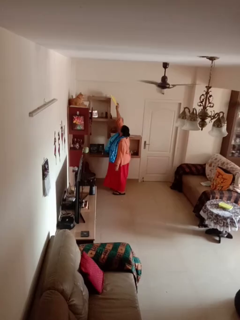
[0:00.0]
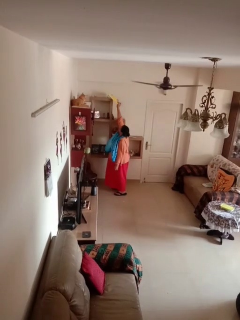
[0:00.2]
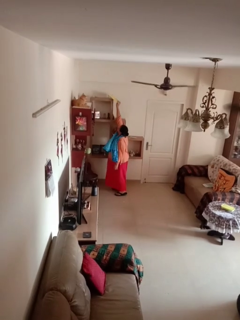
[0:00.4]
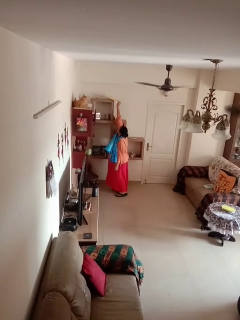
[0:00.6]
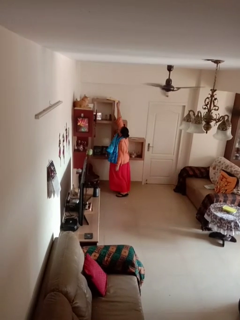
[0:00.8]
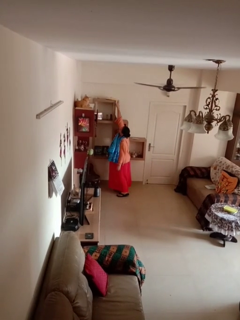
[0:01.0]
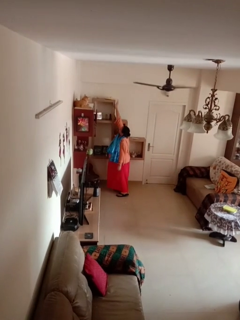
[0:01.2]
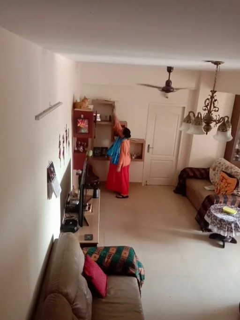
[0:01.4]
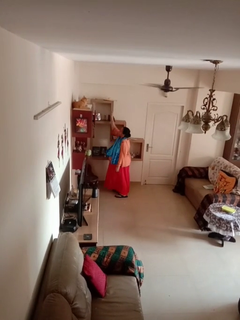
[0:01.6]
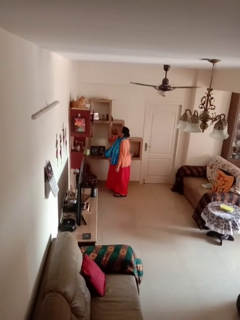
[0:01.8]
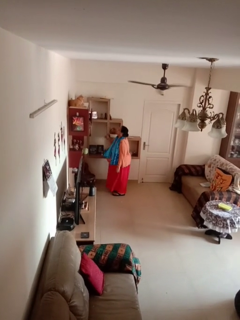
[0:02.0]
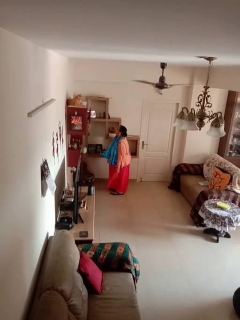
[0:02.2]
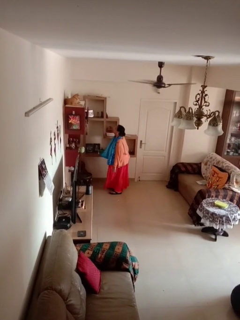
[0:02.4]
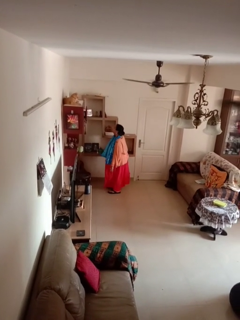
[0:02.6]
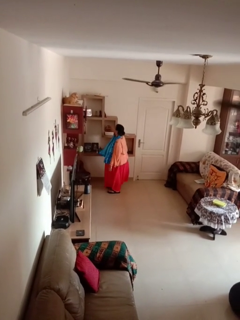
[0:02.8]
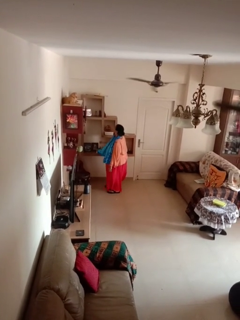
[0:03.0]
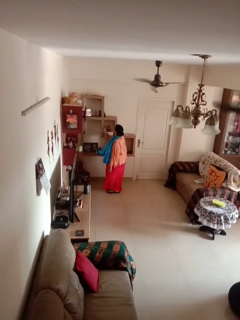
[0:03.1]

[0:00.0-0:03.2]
person puts down object on shelf

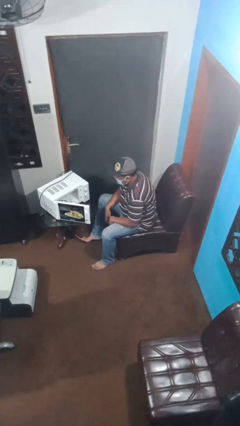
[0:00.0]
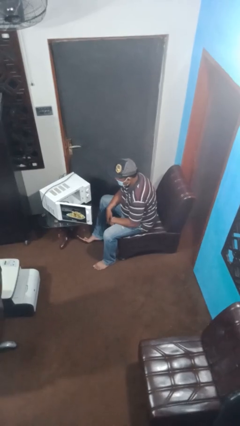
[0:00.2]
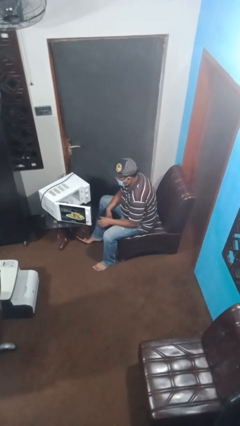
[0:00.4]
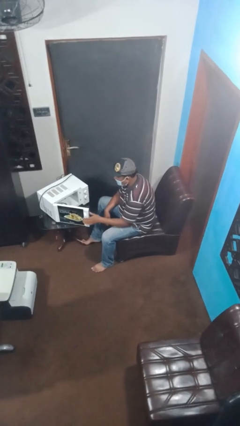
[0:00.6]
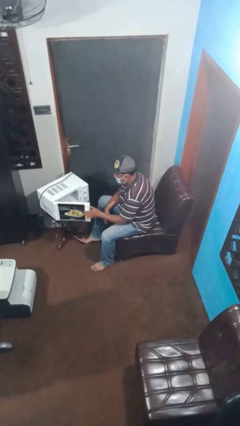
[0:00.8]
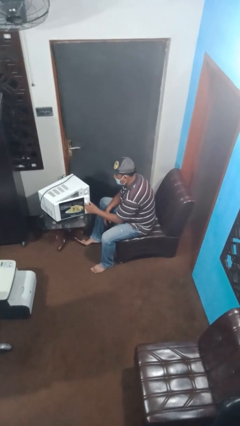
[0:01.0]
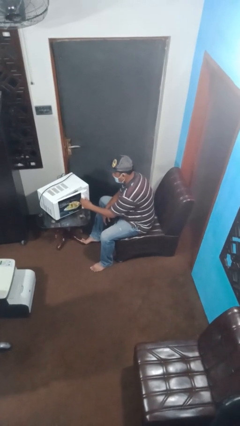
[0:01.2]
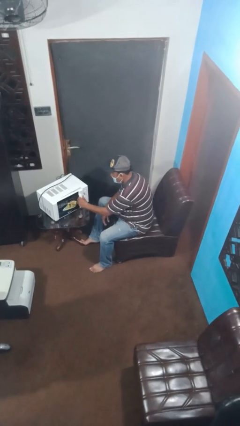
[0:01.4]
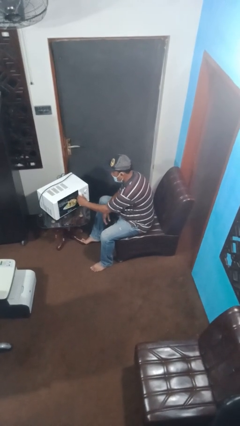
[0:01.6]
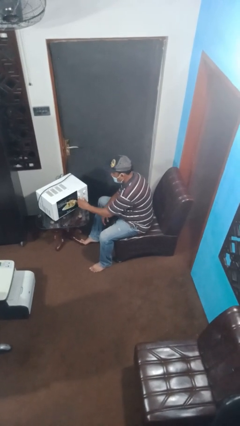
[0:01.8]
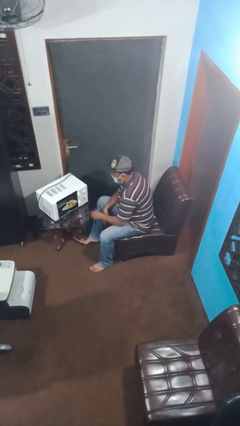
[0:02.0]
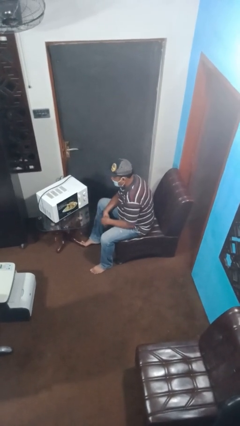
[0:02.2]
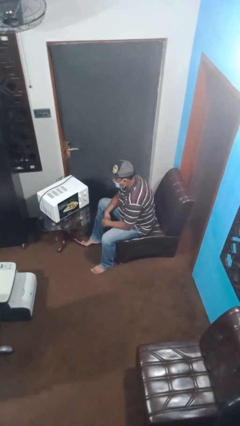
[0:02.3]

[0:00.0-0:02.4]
person closes microwave

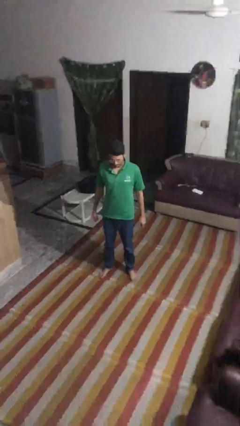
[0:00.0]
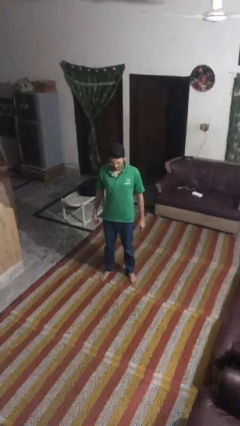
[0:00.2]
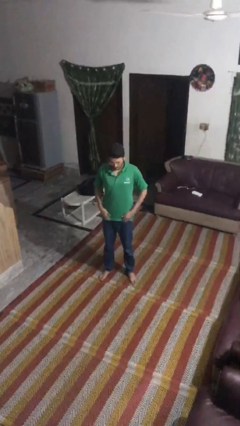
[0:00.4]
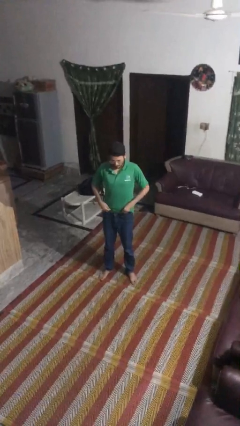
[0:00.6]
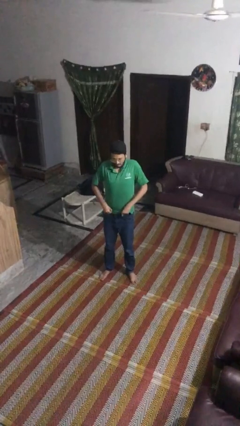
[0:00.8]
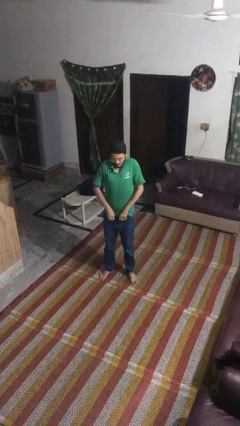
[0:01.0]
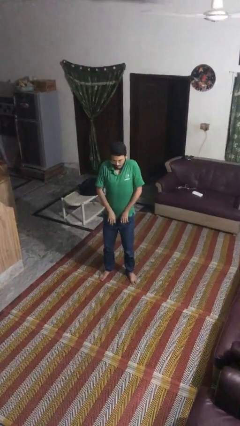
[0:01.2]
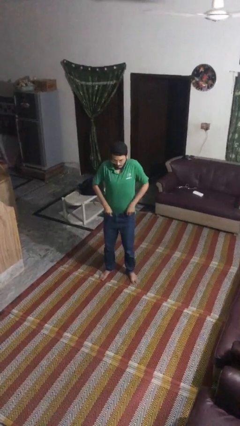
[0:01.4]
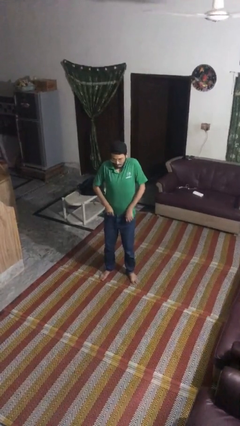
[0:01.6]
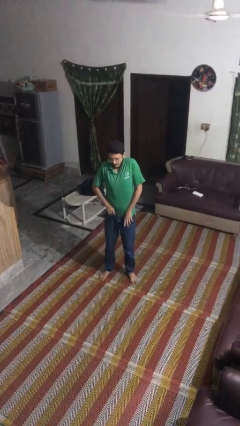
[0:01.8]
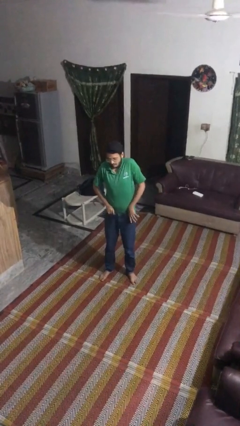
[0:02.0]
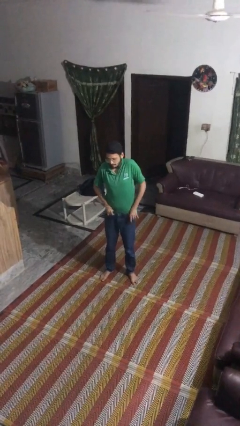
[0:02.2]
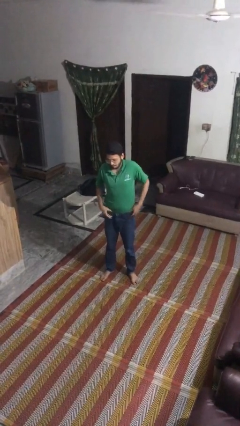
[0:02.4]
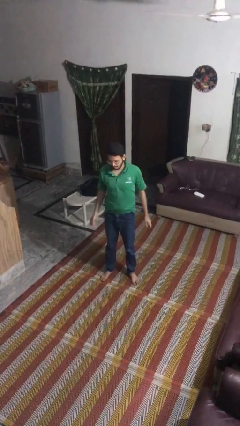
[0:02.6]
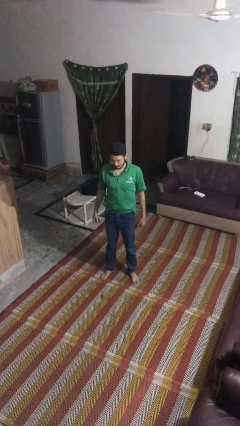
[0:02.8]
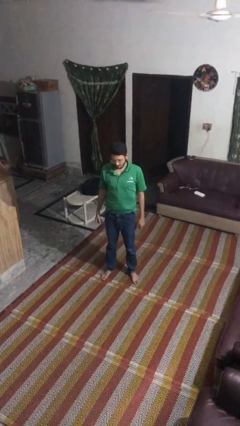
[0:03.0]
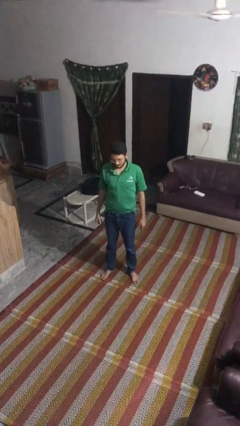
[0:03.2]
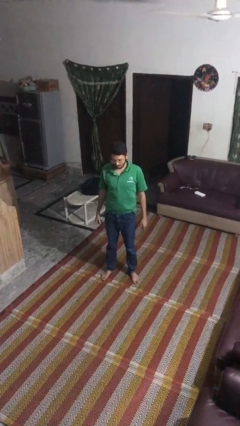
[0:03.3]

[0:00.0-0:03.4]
person tucks in shirt

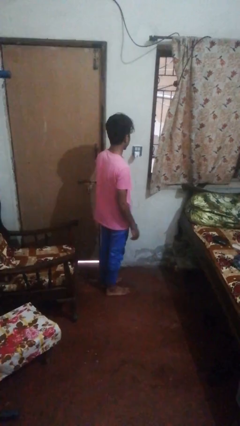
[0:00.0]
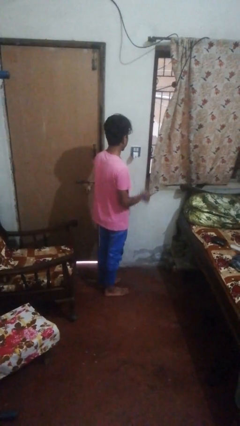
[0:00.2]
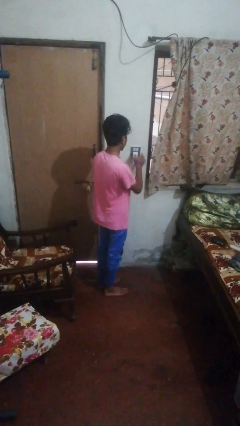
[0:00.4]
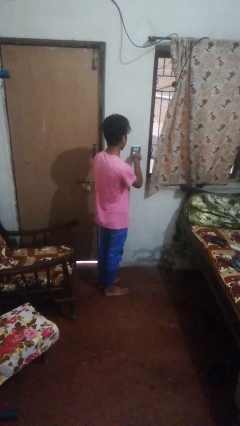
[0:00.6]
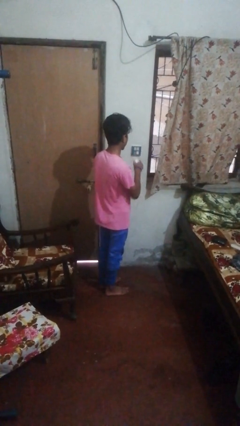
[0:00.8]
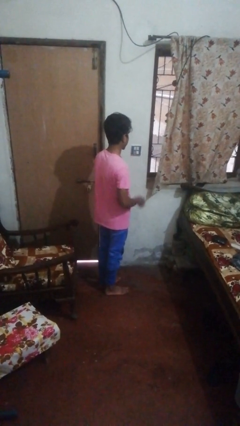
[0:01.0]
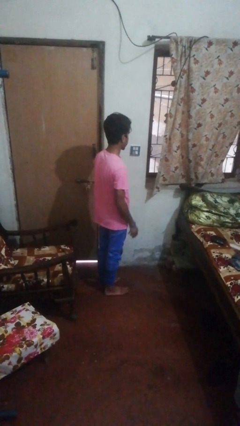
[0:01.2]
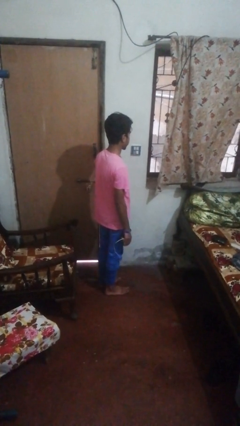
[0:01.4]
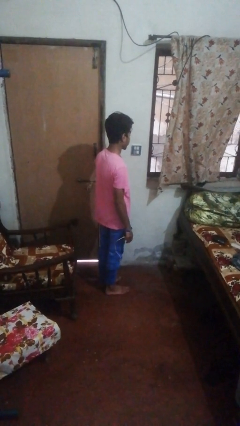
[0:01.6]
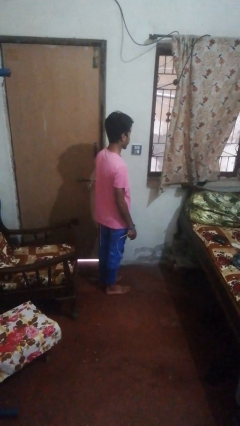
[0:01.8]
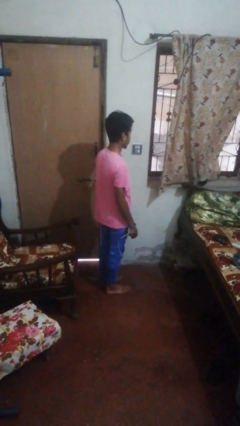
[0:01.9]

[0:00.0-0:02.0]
person unplugs from electrical socket

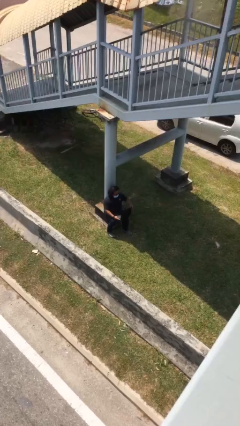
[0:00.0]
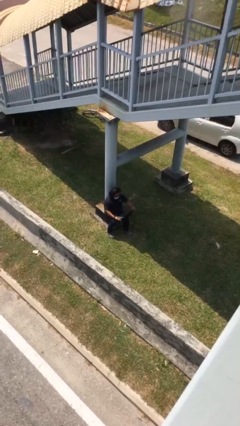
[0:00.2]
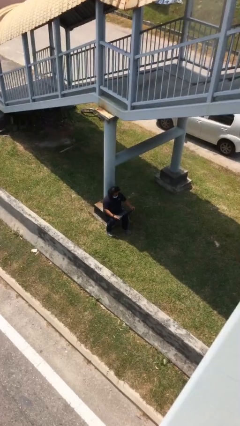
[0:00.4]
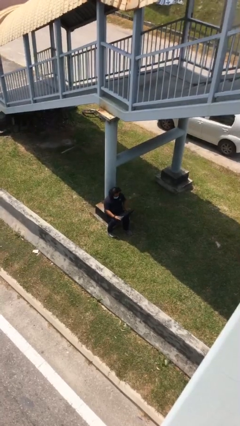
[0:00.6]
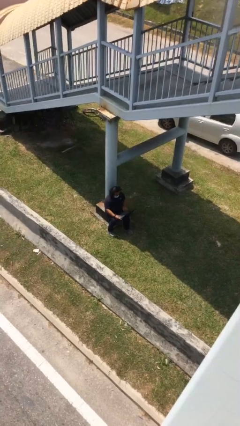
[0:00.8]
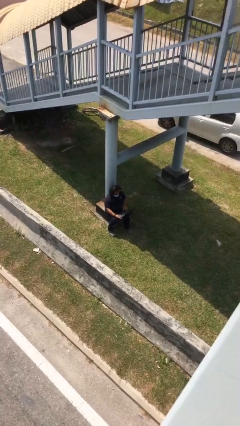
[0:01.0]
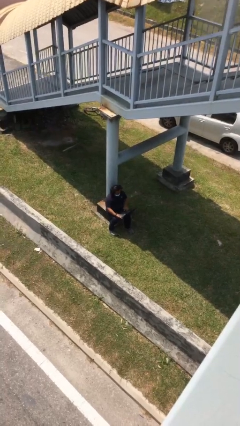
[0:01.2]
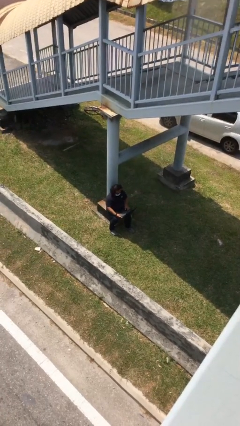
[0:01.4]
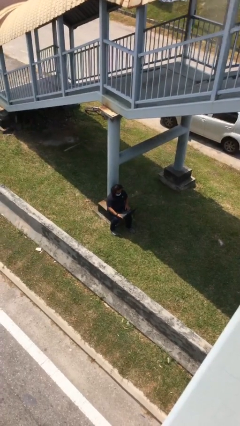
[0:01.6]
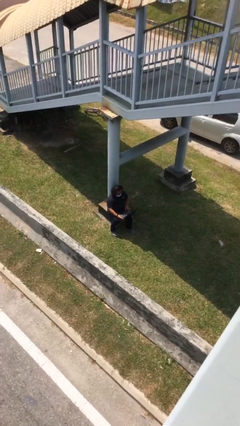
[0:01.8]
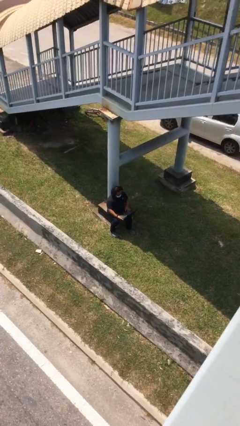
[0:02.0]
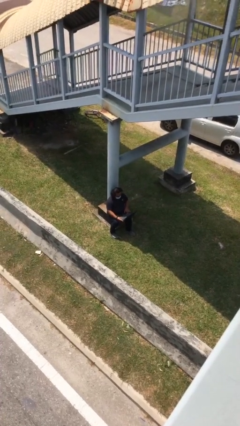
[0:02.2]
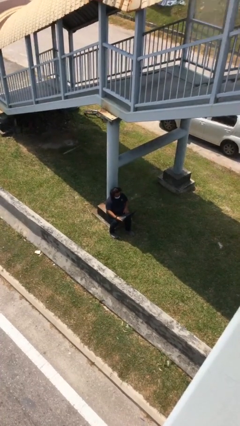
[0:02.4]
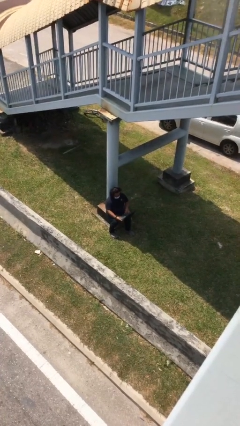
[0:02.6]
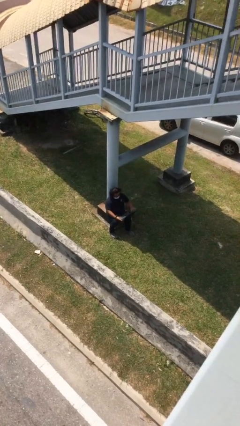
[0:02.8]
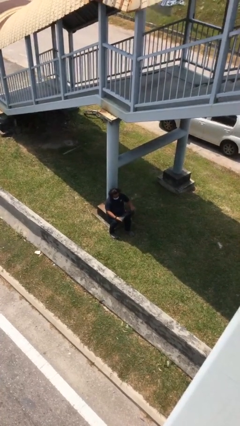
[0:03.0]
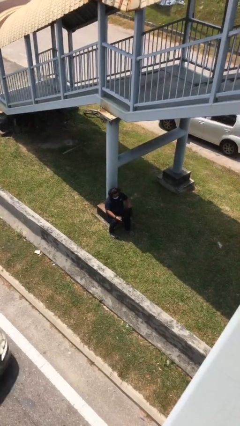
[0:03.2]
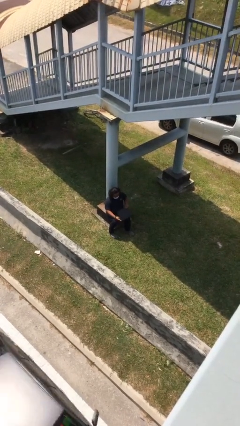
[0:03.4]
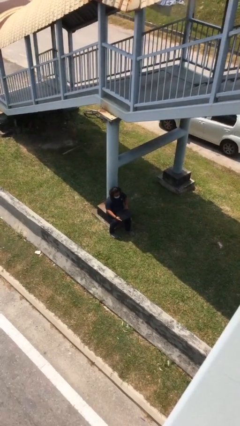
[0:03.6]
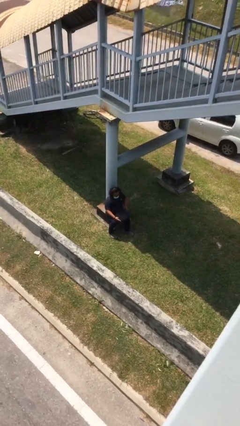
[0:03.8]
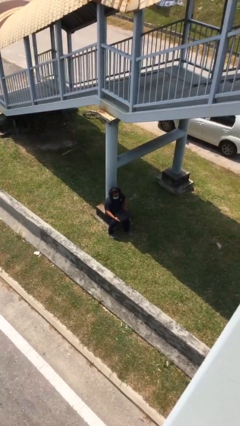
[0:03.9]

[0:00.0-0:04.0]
person interacts with laptop

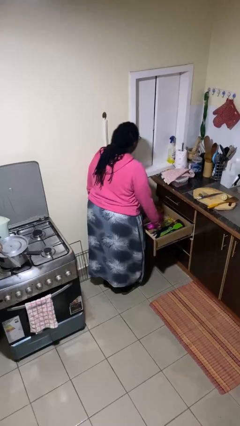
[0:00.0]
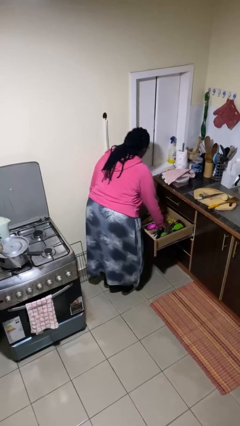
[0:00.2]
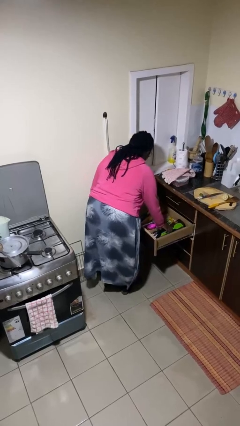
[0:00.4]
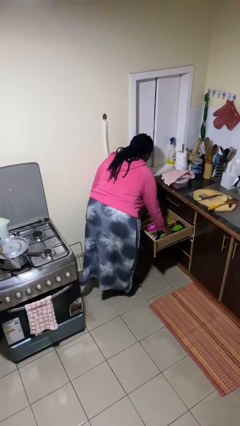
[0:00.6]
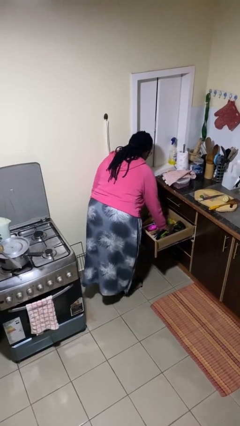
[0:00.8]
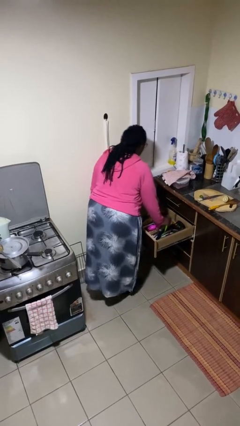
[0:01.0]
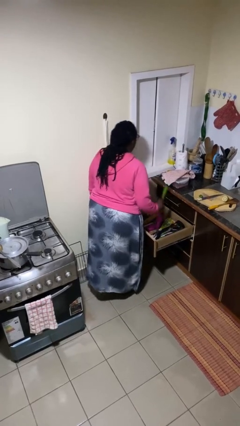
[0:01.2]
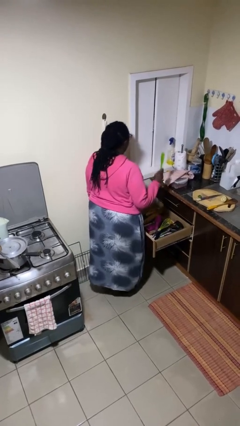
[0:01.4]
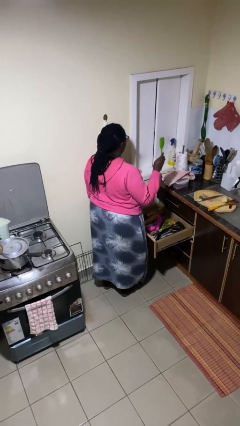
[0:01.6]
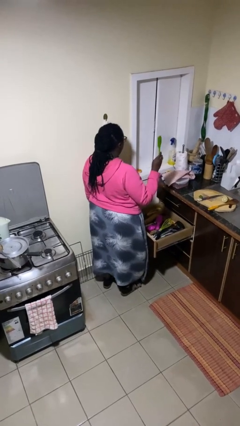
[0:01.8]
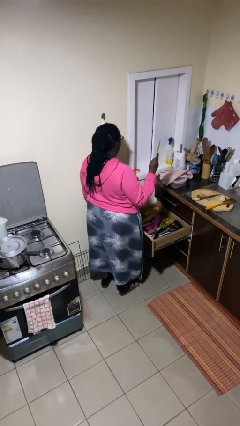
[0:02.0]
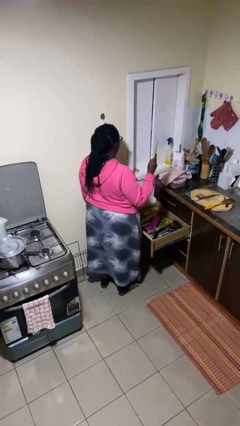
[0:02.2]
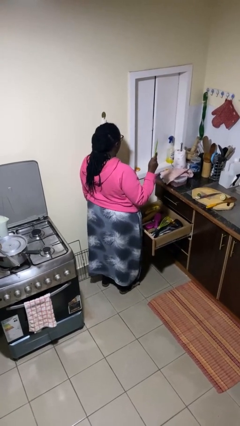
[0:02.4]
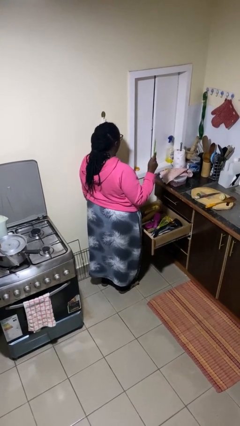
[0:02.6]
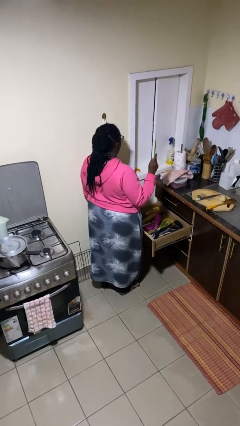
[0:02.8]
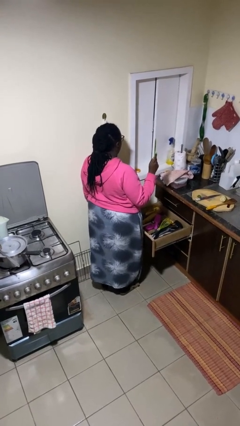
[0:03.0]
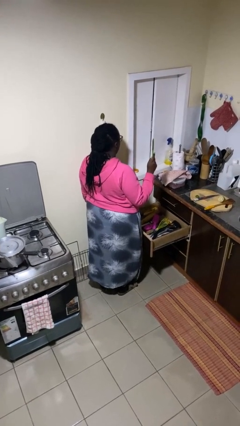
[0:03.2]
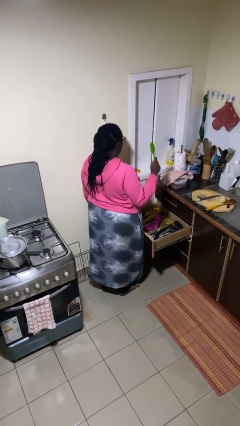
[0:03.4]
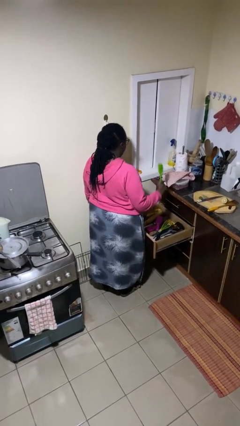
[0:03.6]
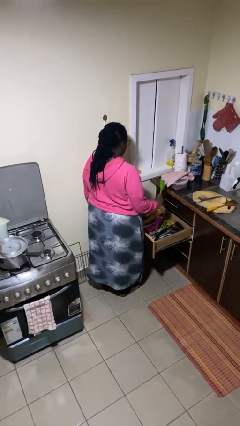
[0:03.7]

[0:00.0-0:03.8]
person takes object from kitchen drawer
